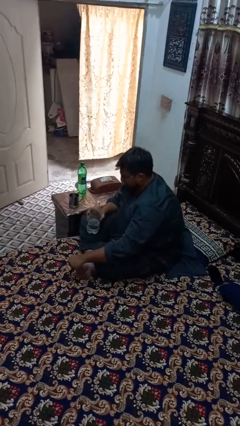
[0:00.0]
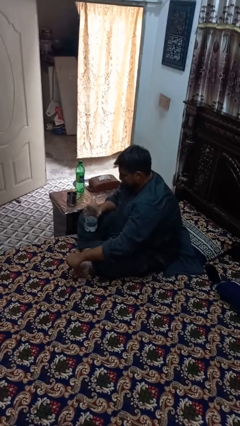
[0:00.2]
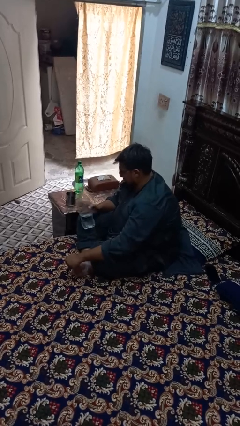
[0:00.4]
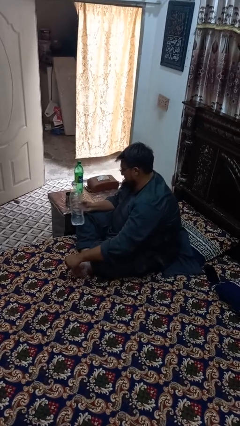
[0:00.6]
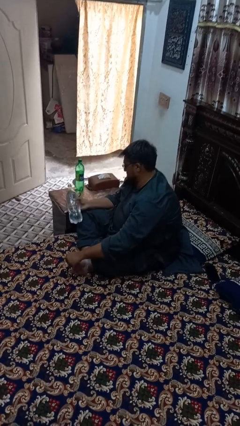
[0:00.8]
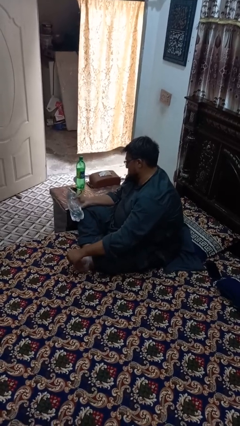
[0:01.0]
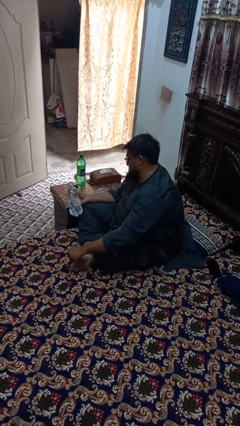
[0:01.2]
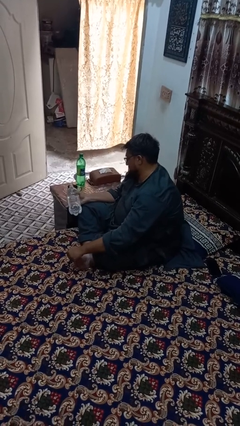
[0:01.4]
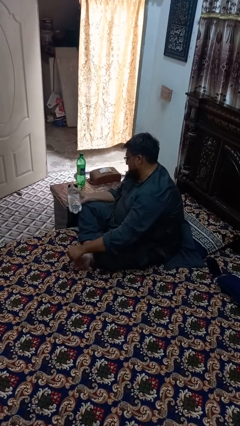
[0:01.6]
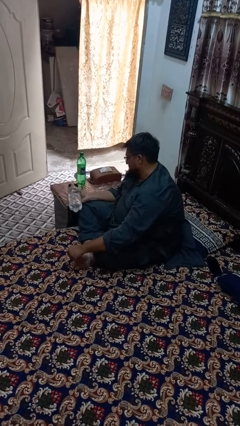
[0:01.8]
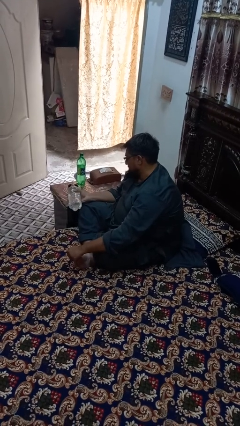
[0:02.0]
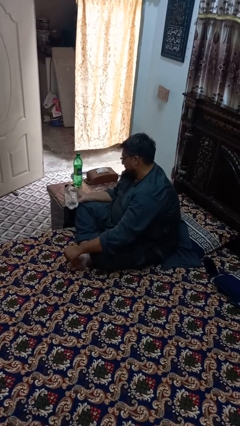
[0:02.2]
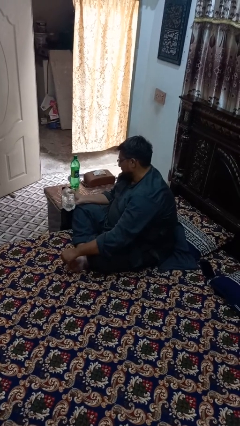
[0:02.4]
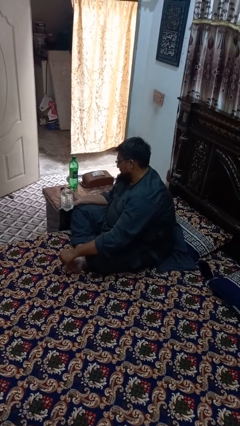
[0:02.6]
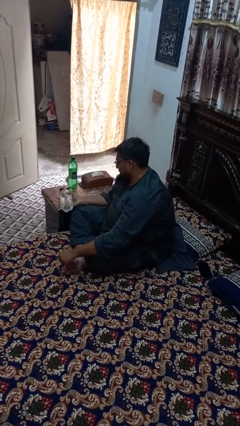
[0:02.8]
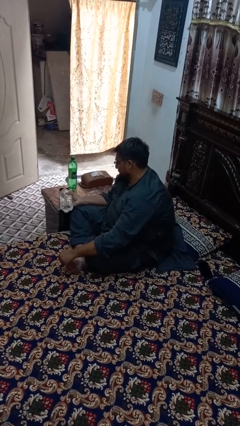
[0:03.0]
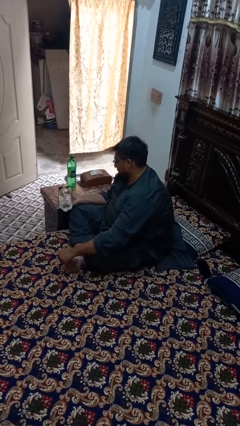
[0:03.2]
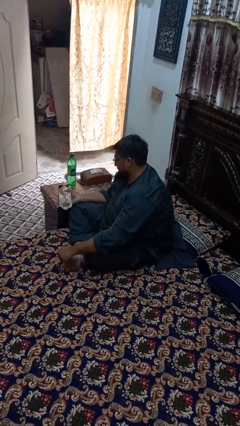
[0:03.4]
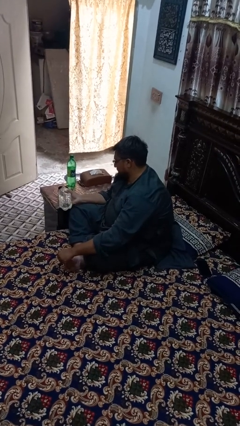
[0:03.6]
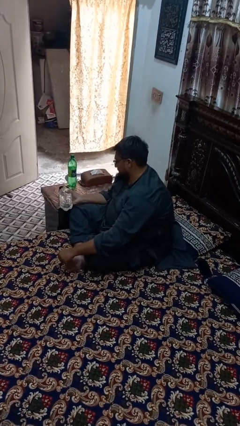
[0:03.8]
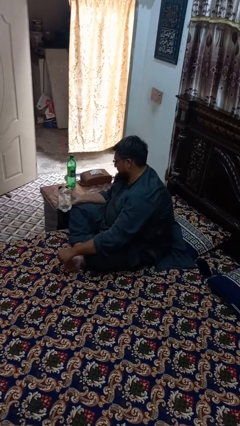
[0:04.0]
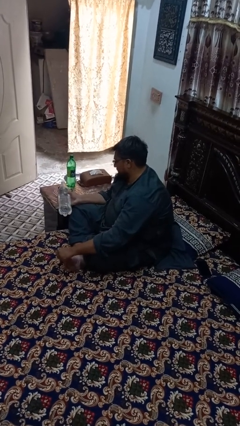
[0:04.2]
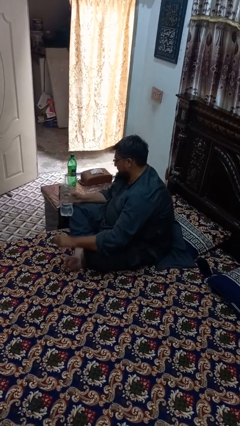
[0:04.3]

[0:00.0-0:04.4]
person pours liquid into cup

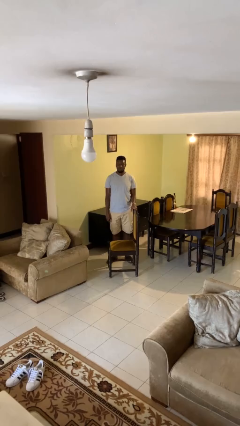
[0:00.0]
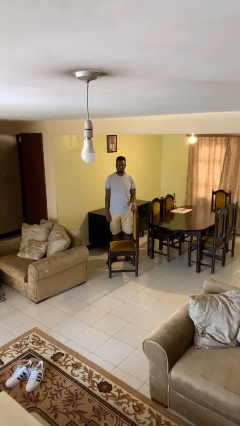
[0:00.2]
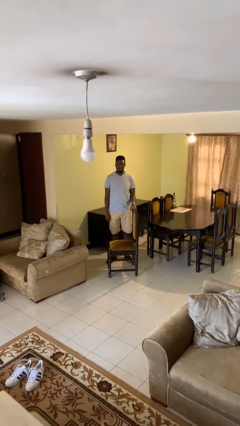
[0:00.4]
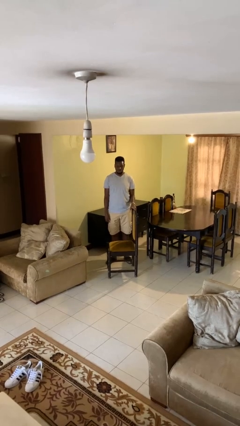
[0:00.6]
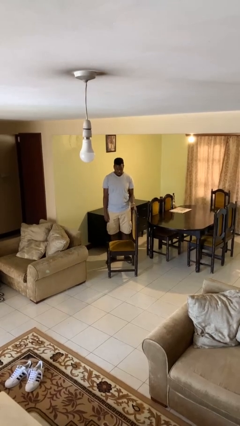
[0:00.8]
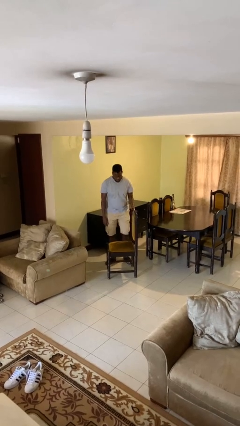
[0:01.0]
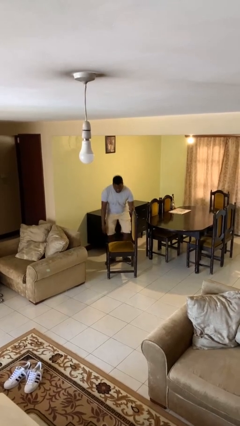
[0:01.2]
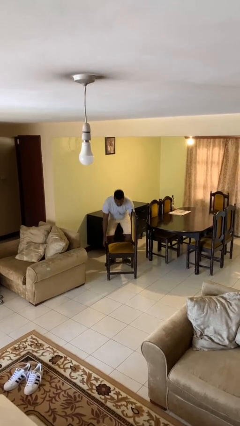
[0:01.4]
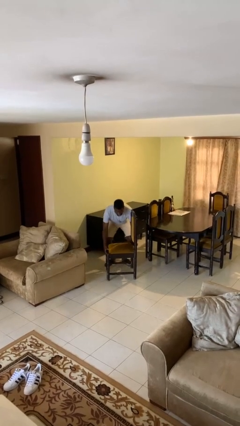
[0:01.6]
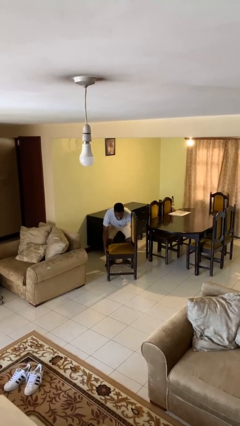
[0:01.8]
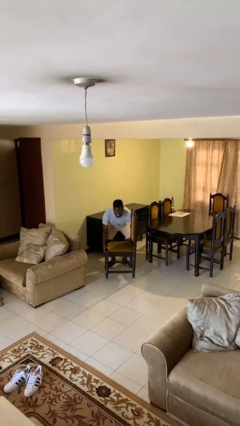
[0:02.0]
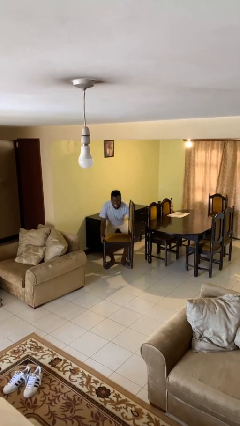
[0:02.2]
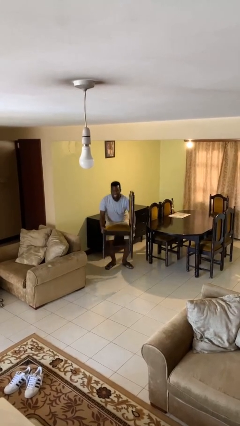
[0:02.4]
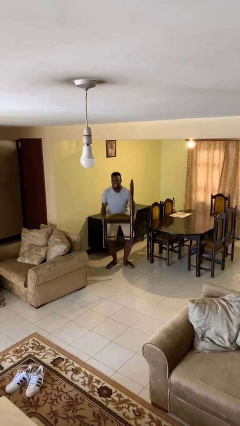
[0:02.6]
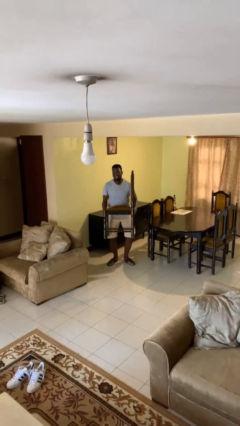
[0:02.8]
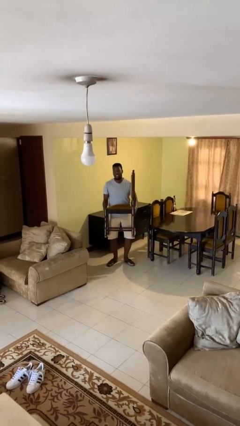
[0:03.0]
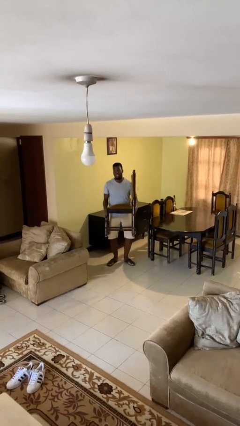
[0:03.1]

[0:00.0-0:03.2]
person picks up object from floor

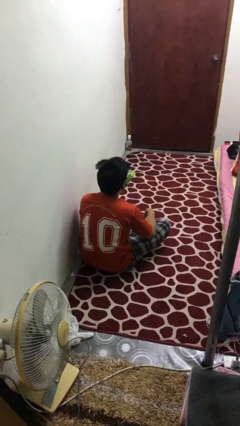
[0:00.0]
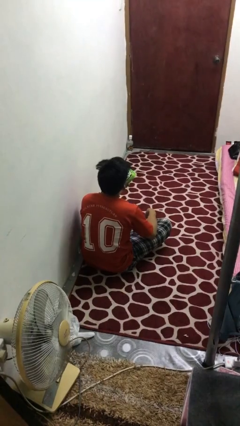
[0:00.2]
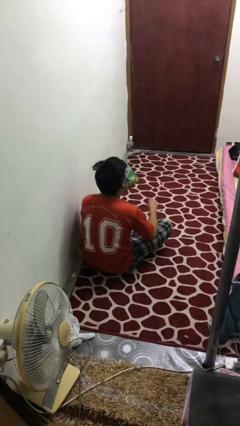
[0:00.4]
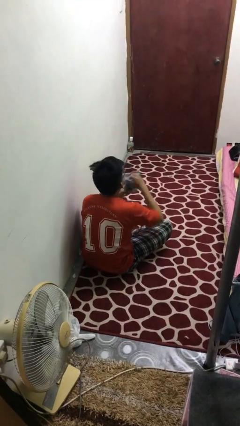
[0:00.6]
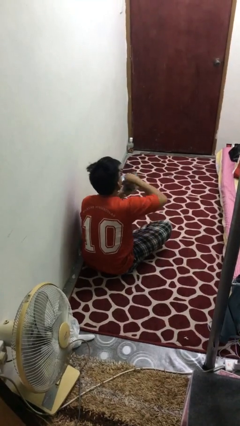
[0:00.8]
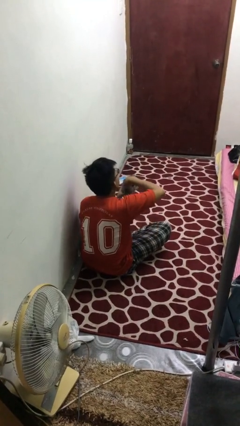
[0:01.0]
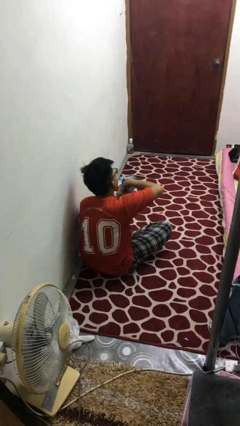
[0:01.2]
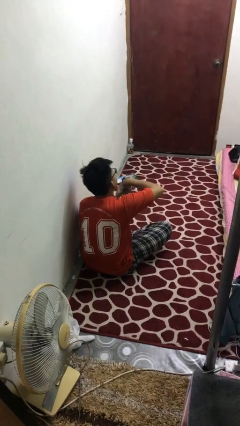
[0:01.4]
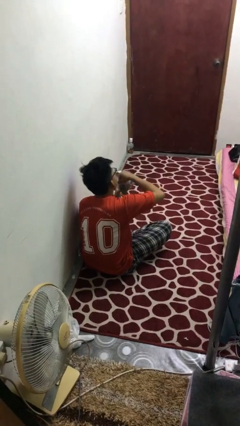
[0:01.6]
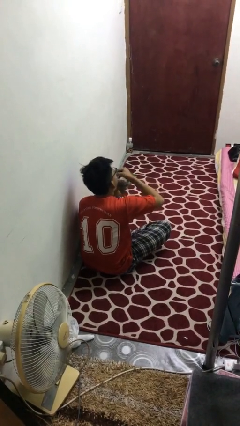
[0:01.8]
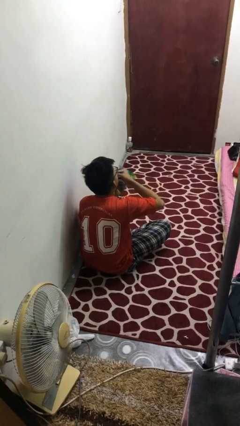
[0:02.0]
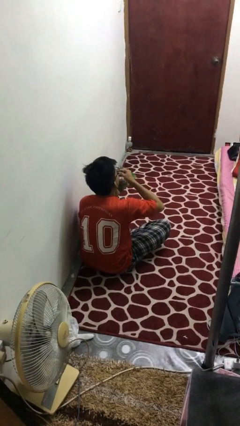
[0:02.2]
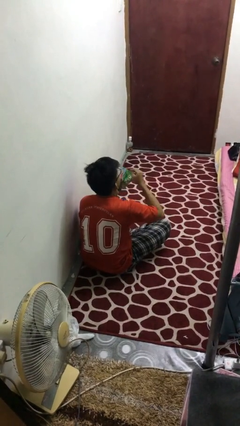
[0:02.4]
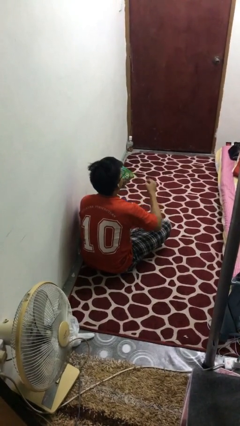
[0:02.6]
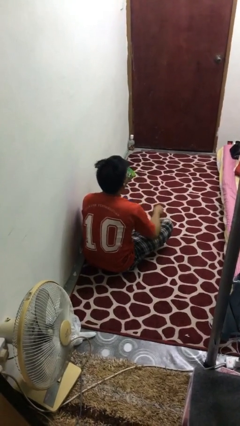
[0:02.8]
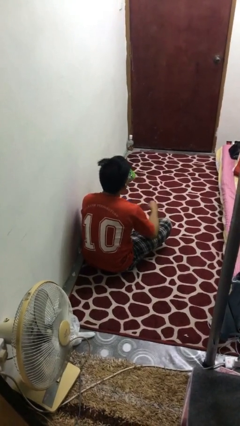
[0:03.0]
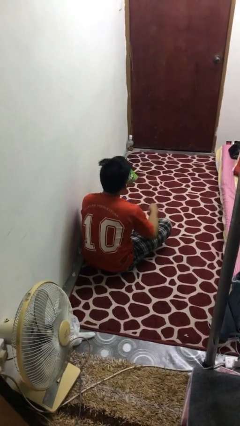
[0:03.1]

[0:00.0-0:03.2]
person eats snack from bag

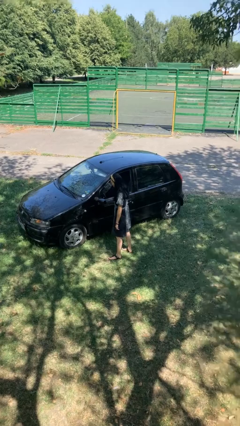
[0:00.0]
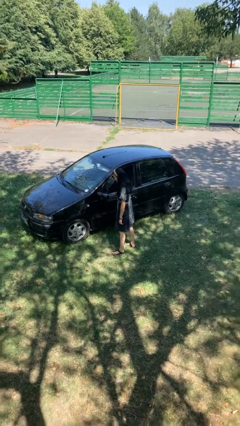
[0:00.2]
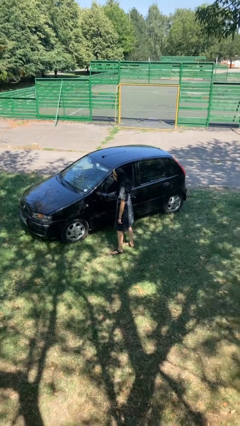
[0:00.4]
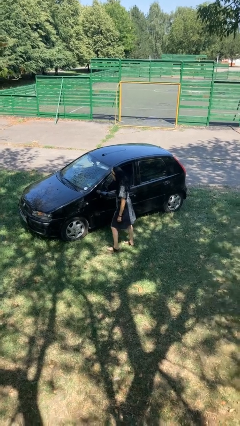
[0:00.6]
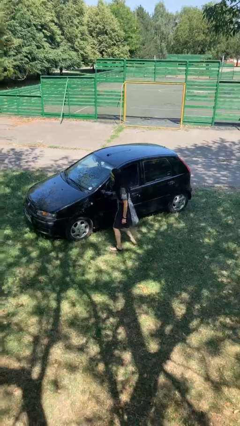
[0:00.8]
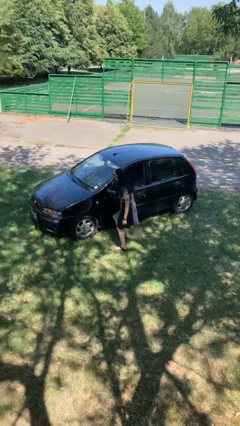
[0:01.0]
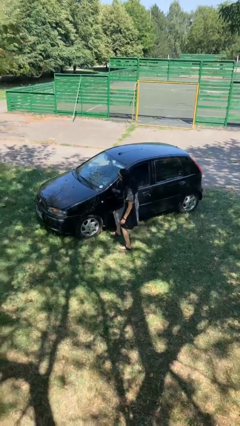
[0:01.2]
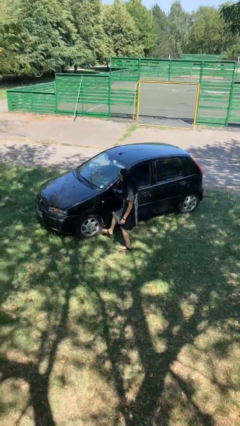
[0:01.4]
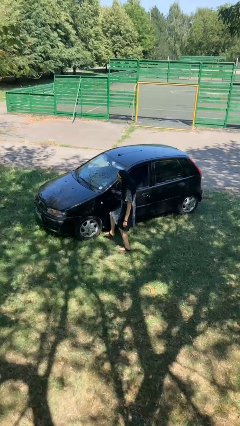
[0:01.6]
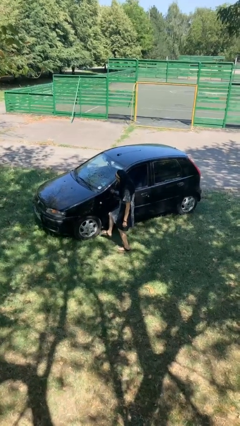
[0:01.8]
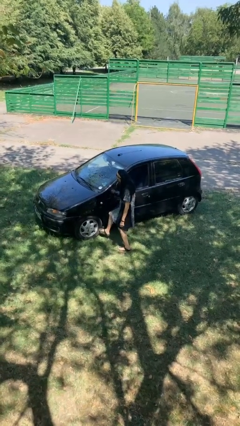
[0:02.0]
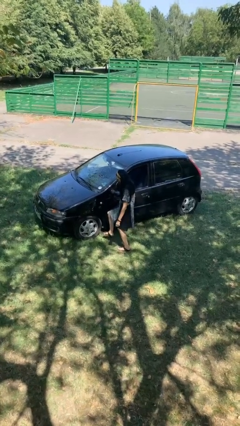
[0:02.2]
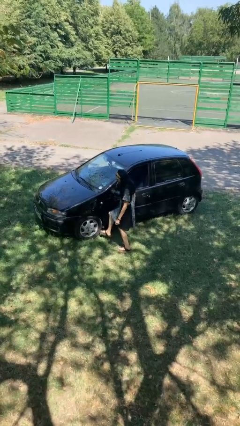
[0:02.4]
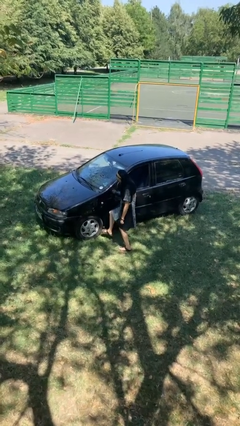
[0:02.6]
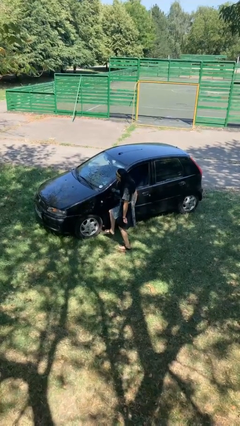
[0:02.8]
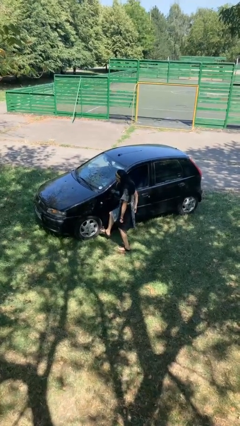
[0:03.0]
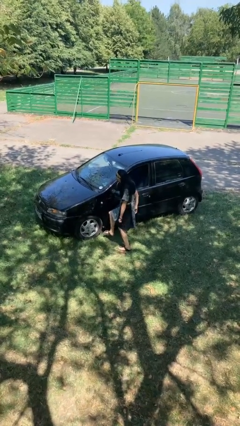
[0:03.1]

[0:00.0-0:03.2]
person kicks car tires

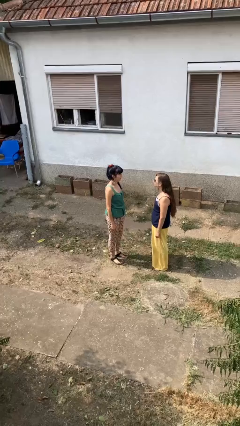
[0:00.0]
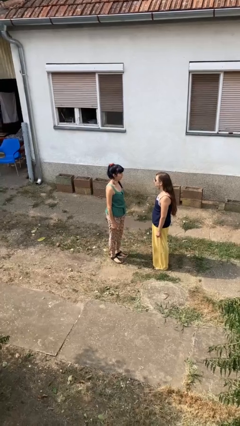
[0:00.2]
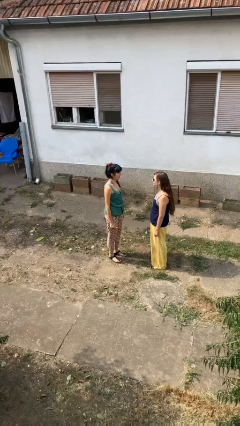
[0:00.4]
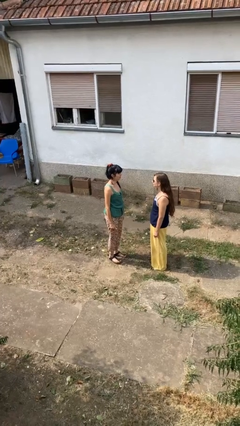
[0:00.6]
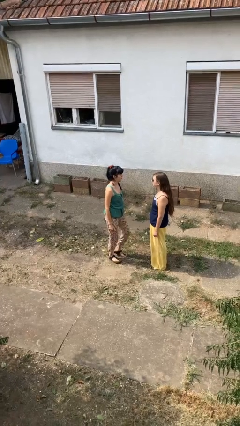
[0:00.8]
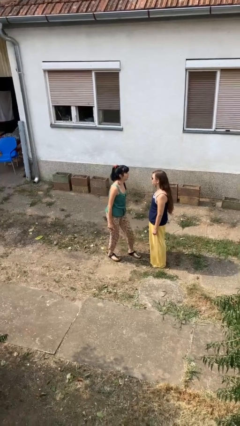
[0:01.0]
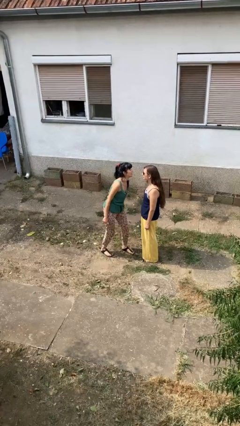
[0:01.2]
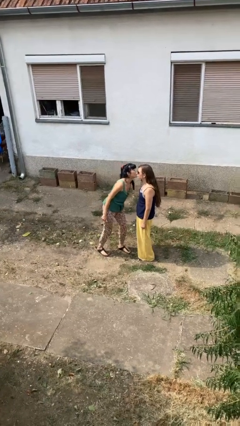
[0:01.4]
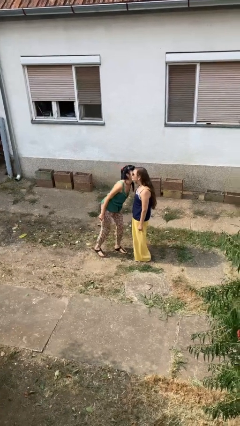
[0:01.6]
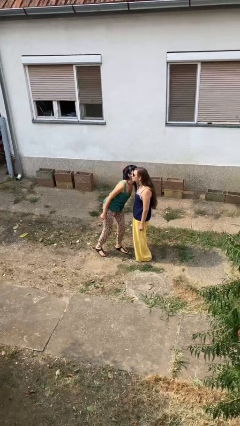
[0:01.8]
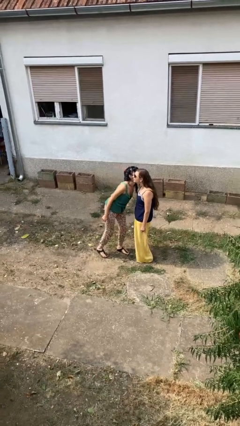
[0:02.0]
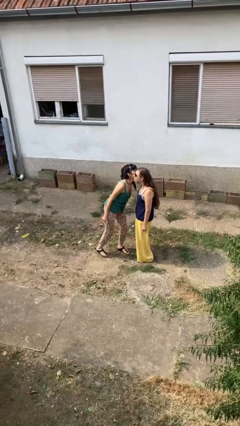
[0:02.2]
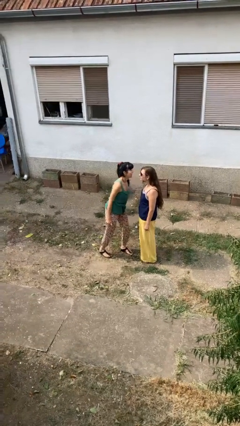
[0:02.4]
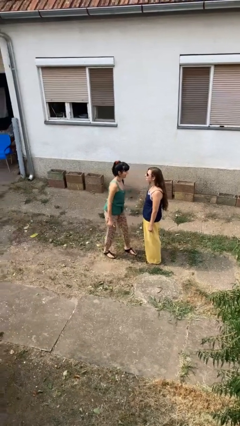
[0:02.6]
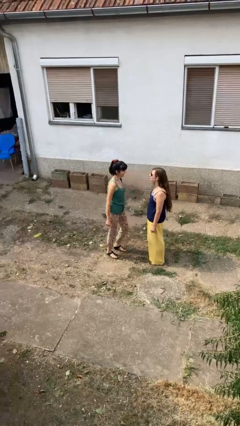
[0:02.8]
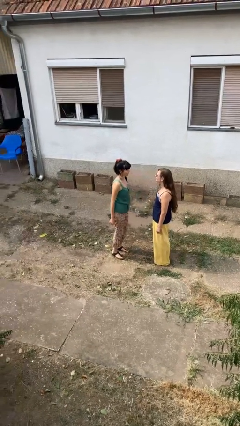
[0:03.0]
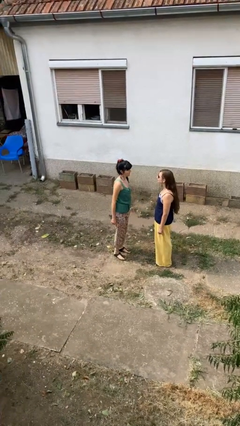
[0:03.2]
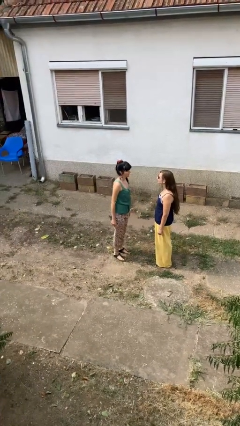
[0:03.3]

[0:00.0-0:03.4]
person kisses cheek of person

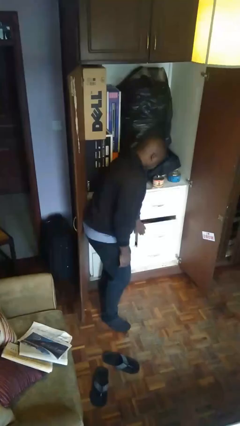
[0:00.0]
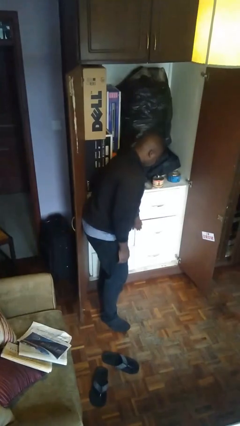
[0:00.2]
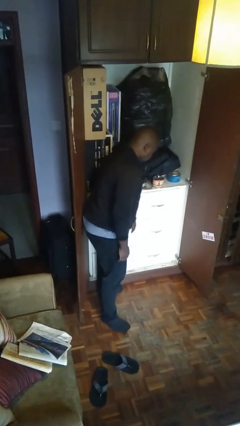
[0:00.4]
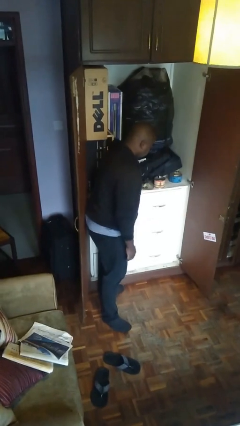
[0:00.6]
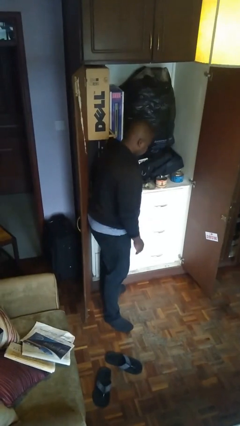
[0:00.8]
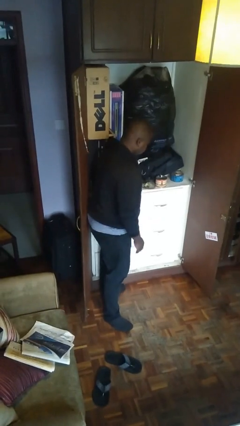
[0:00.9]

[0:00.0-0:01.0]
person closes dresser drawer
